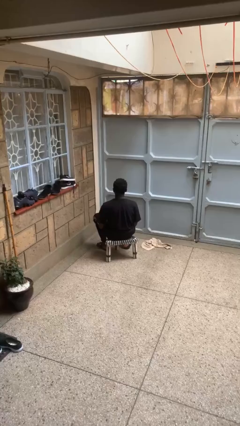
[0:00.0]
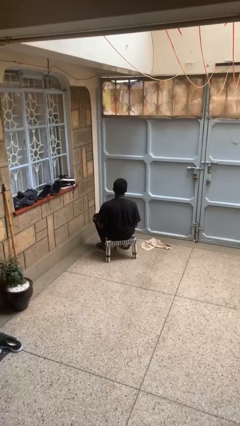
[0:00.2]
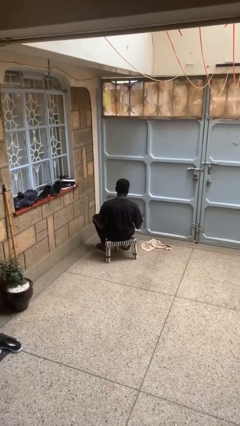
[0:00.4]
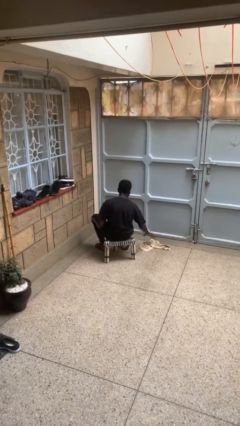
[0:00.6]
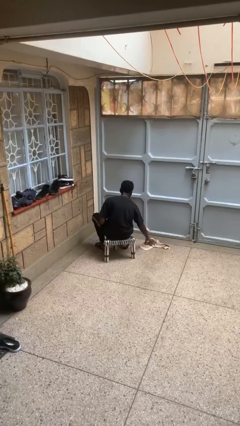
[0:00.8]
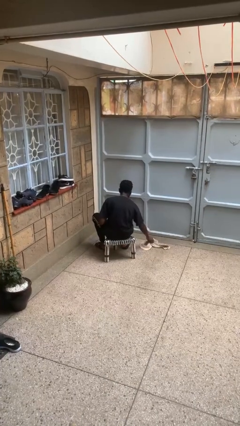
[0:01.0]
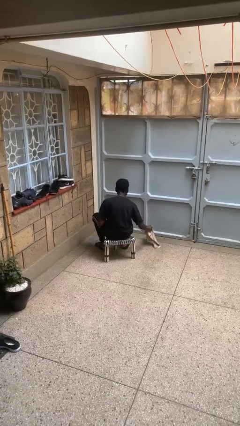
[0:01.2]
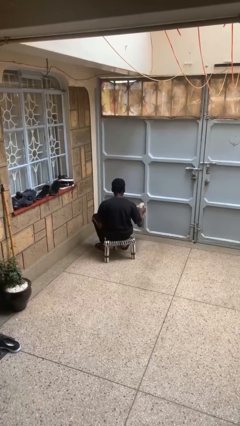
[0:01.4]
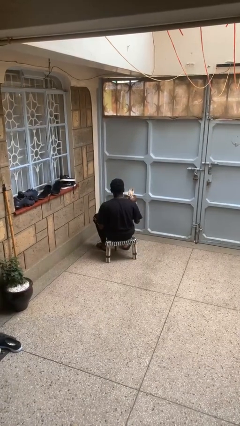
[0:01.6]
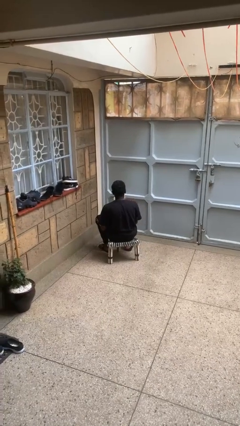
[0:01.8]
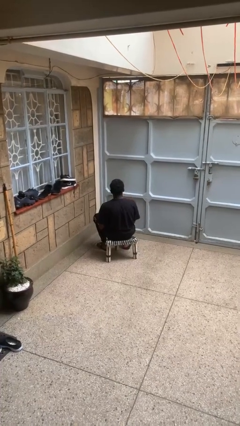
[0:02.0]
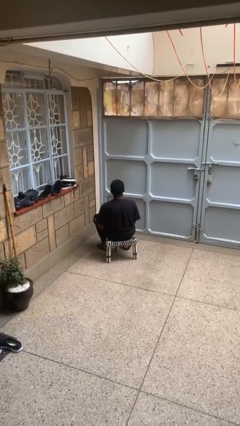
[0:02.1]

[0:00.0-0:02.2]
person picks up object from floor

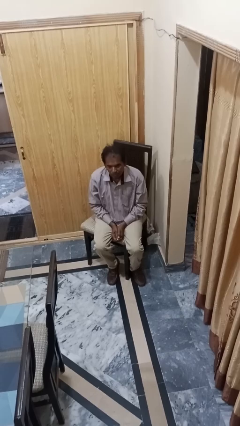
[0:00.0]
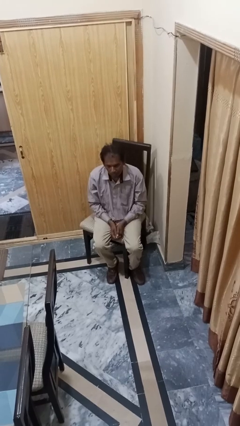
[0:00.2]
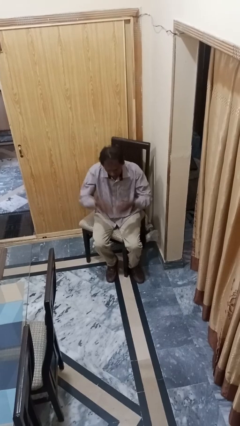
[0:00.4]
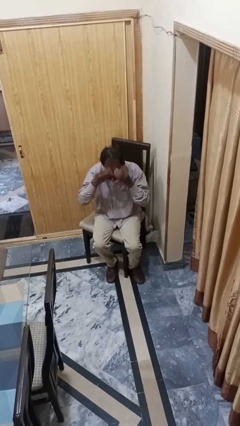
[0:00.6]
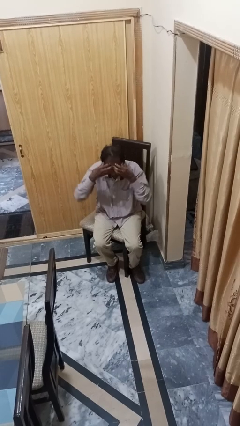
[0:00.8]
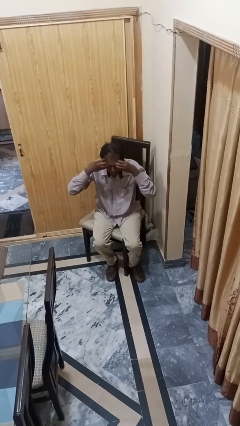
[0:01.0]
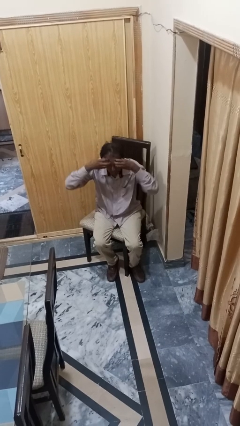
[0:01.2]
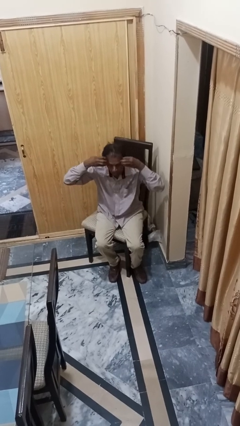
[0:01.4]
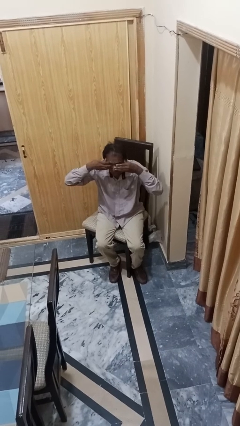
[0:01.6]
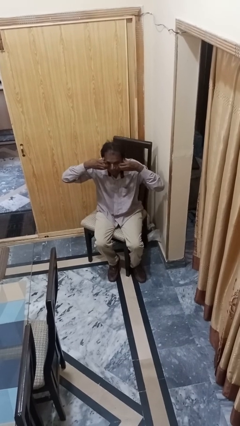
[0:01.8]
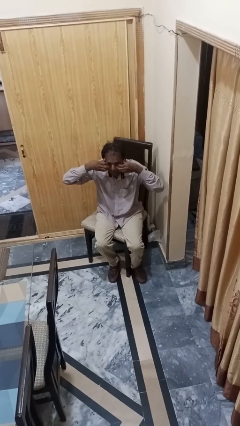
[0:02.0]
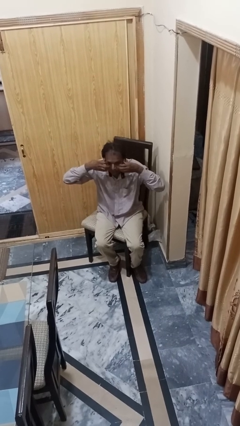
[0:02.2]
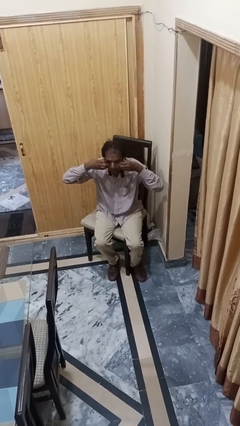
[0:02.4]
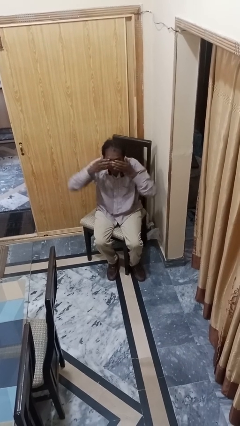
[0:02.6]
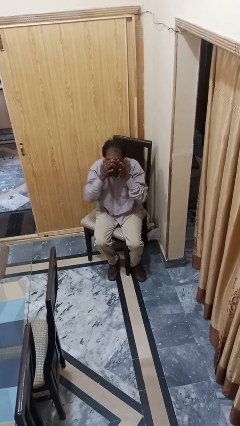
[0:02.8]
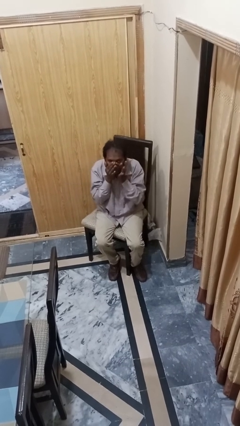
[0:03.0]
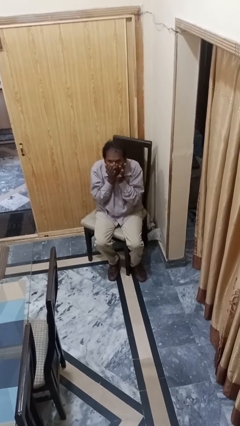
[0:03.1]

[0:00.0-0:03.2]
person scratches face

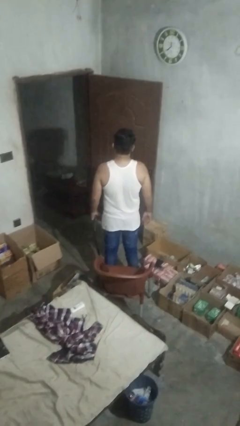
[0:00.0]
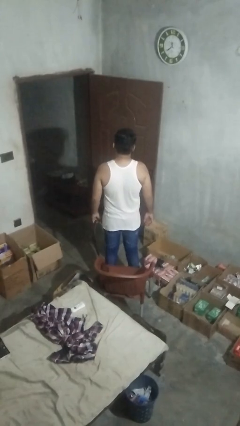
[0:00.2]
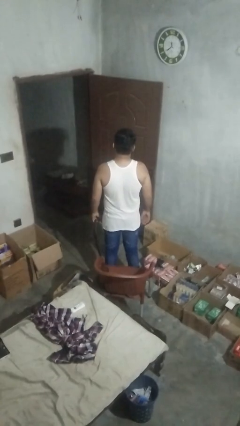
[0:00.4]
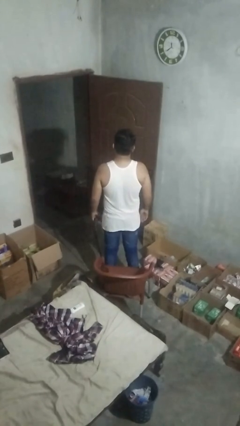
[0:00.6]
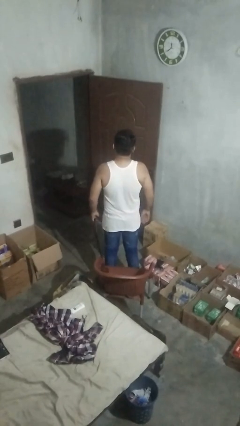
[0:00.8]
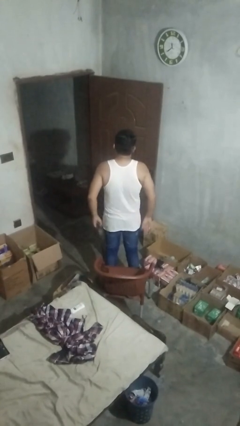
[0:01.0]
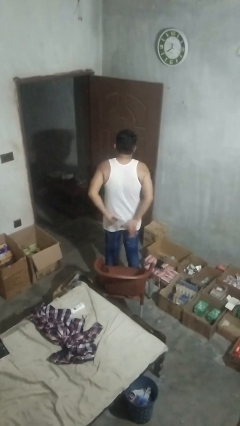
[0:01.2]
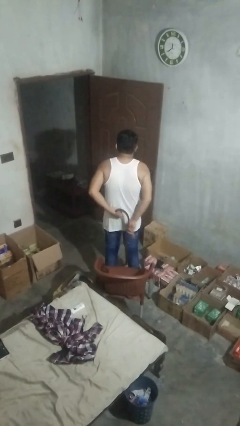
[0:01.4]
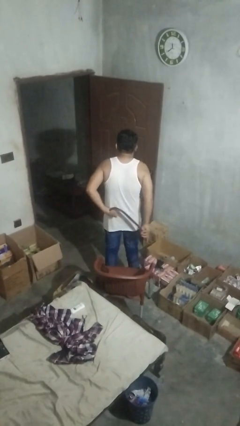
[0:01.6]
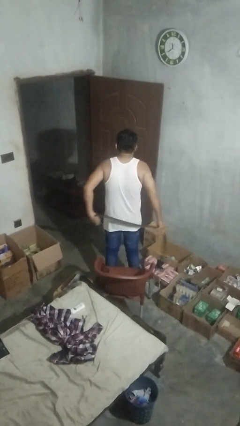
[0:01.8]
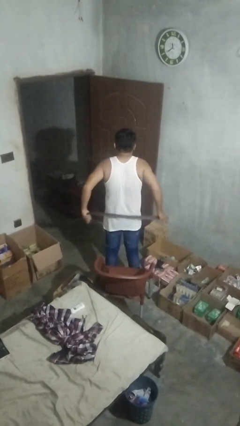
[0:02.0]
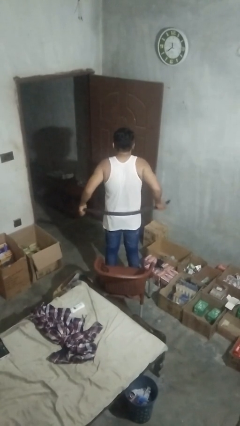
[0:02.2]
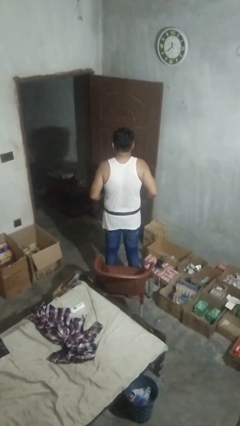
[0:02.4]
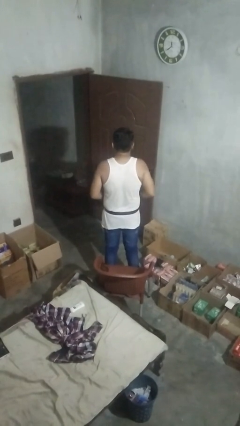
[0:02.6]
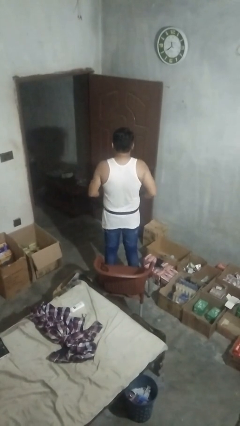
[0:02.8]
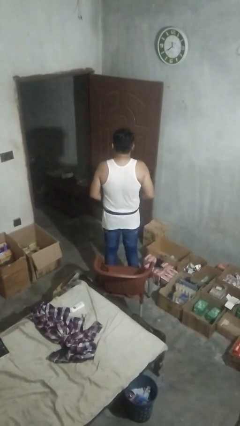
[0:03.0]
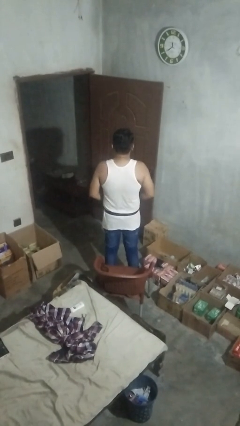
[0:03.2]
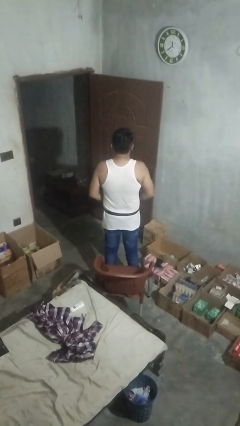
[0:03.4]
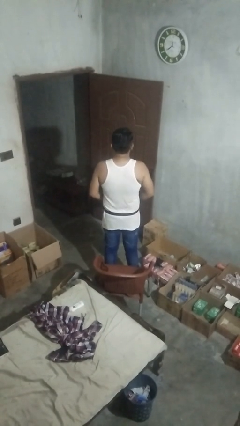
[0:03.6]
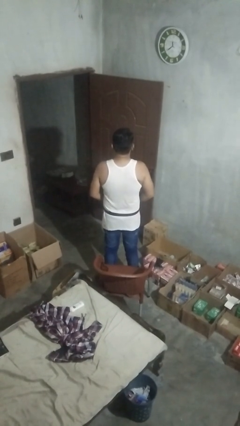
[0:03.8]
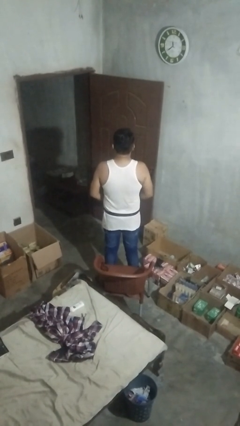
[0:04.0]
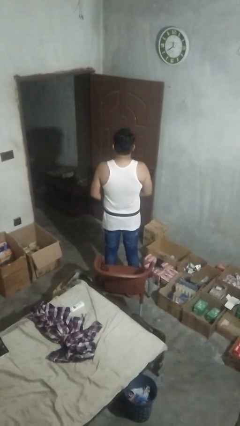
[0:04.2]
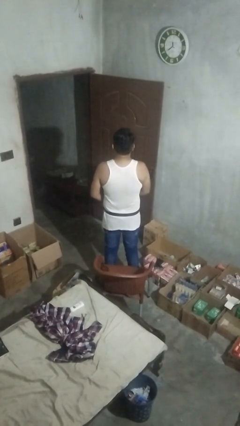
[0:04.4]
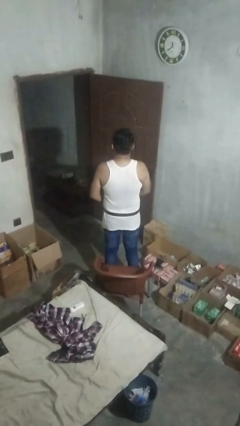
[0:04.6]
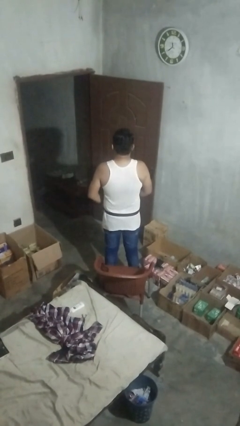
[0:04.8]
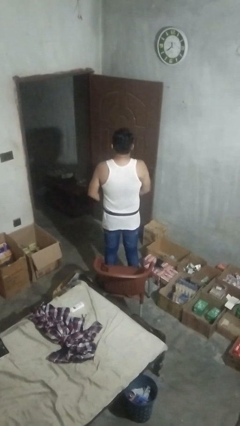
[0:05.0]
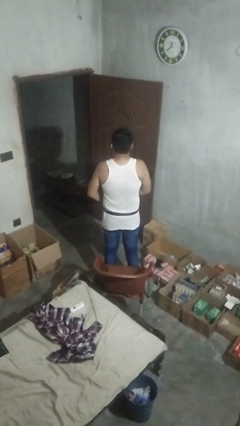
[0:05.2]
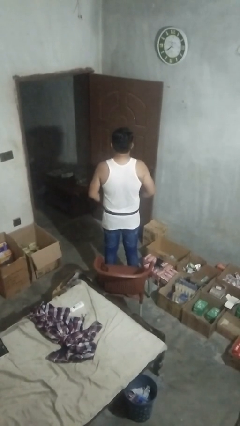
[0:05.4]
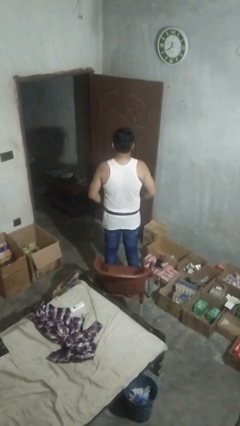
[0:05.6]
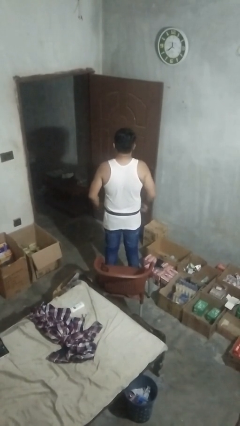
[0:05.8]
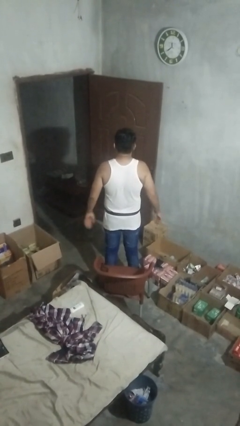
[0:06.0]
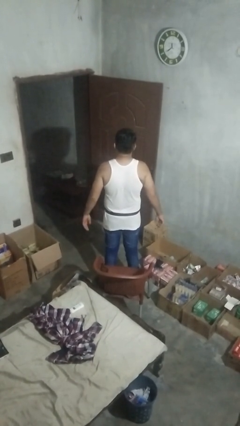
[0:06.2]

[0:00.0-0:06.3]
person puts on belt

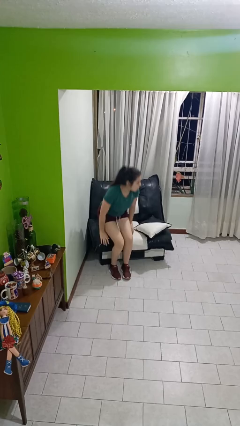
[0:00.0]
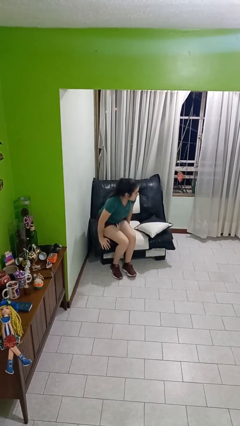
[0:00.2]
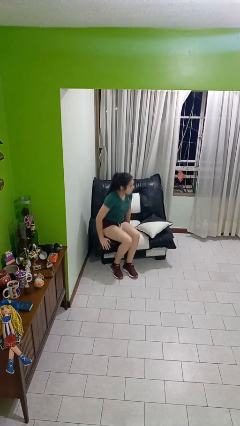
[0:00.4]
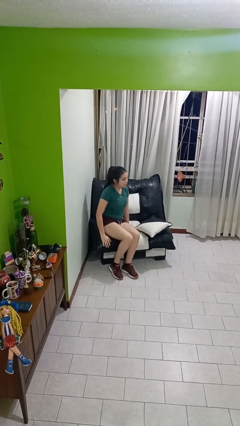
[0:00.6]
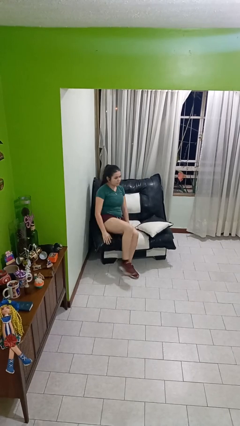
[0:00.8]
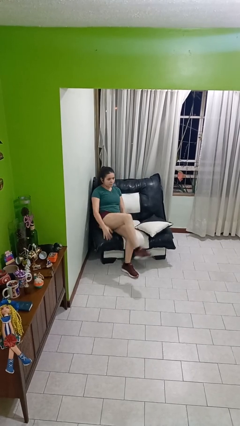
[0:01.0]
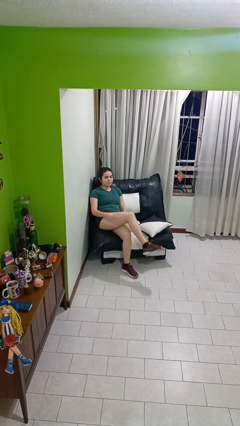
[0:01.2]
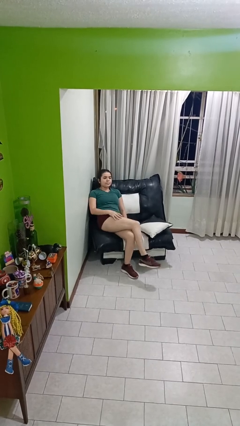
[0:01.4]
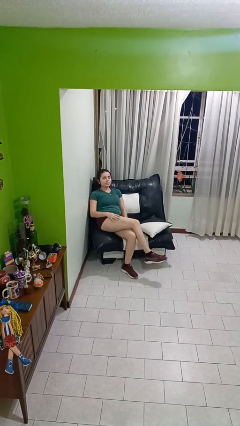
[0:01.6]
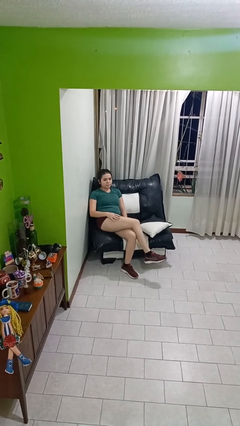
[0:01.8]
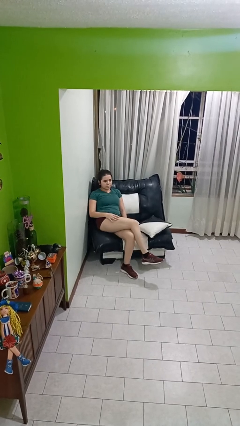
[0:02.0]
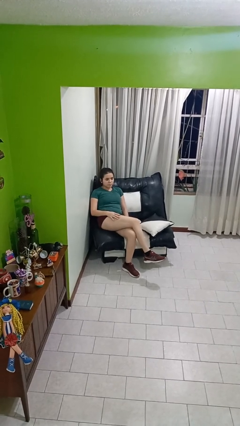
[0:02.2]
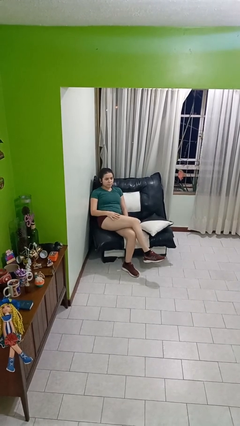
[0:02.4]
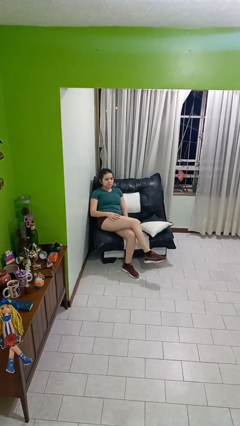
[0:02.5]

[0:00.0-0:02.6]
person lies down on couch

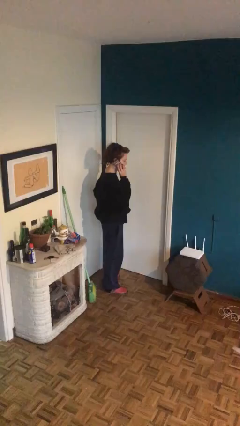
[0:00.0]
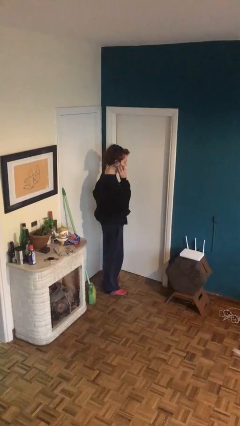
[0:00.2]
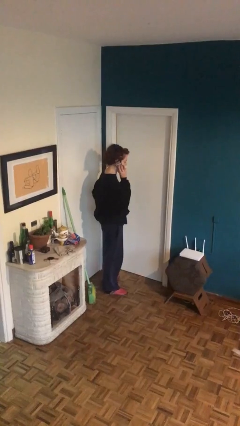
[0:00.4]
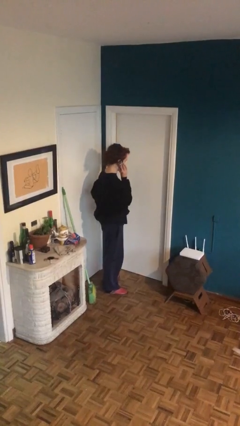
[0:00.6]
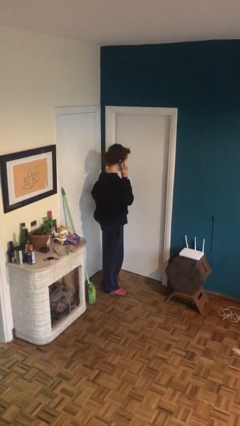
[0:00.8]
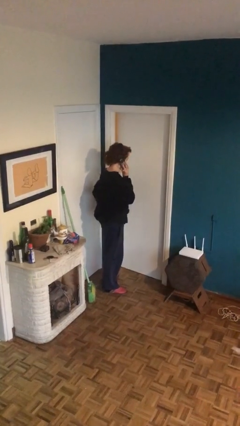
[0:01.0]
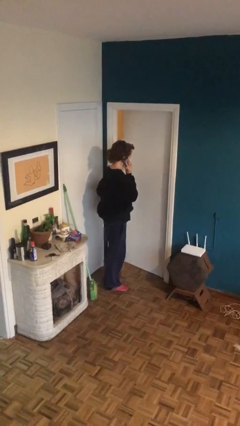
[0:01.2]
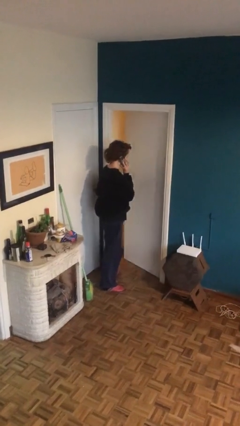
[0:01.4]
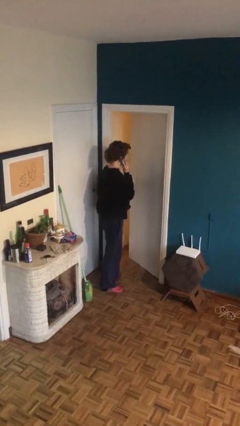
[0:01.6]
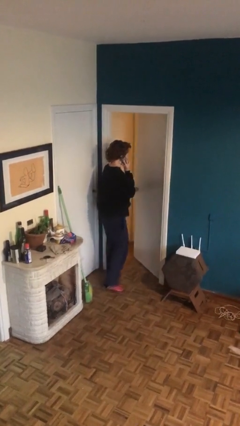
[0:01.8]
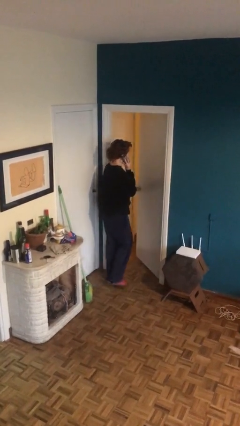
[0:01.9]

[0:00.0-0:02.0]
person opens facility door

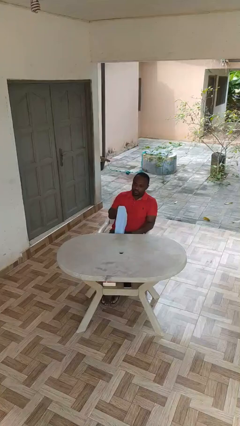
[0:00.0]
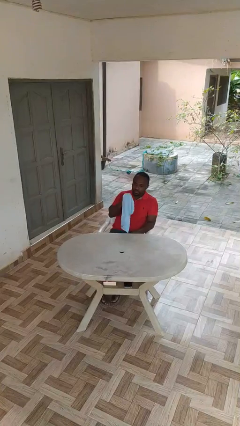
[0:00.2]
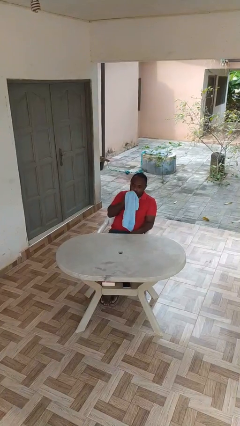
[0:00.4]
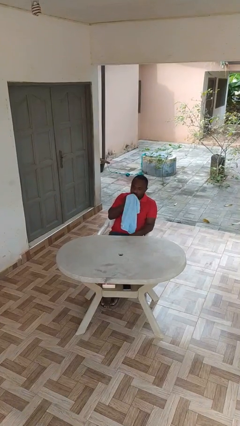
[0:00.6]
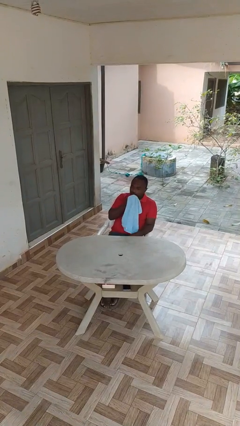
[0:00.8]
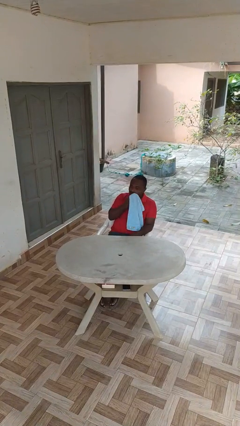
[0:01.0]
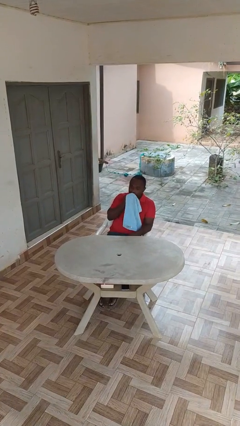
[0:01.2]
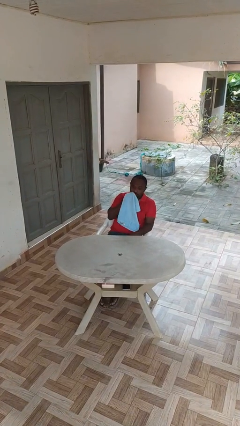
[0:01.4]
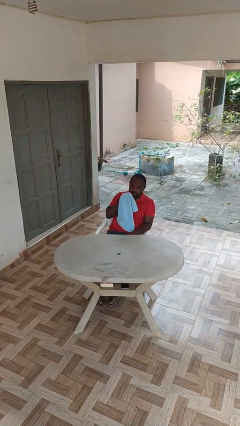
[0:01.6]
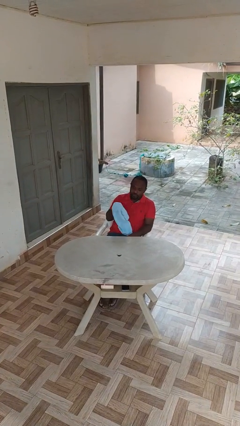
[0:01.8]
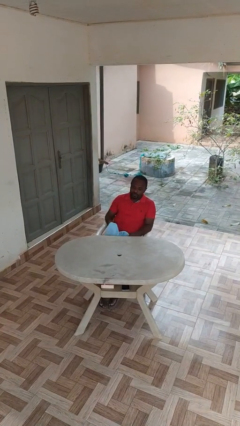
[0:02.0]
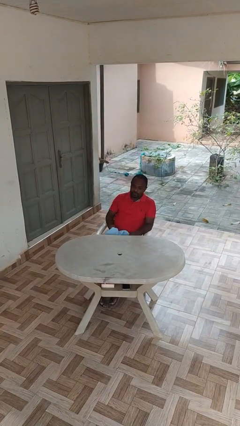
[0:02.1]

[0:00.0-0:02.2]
person wipes mouth with napkin
